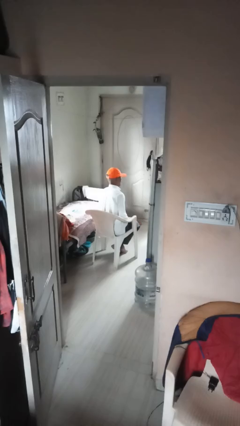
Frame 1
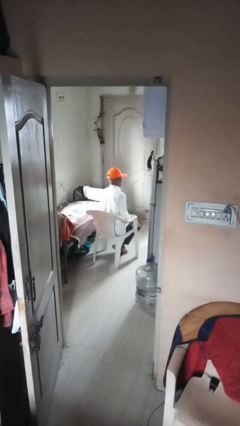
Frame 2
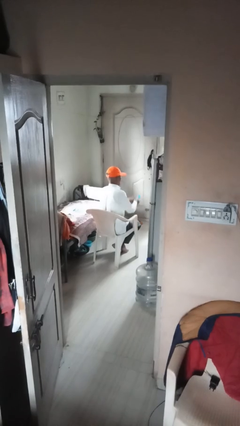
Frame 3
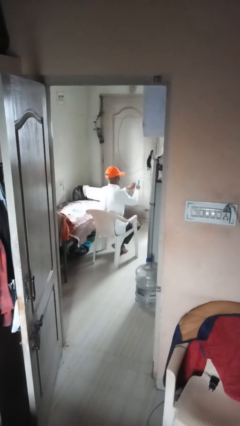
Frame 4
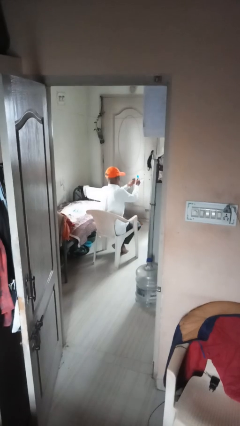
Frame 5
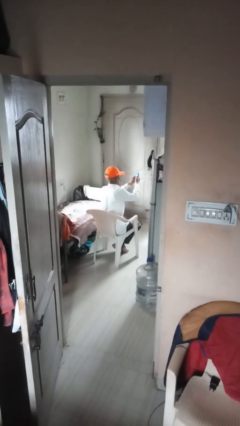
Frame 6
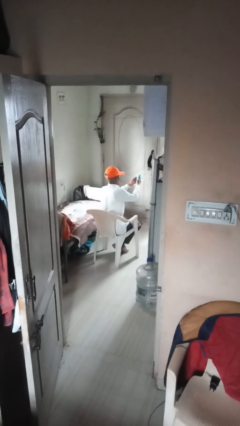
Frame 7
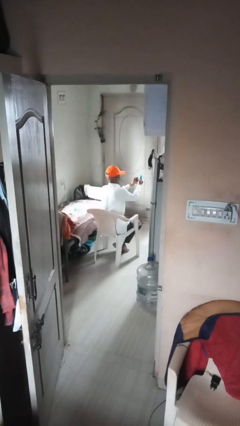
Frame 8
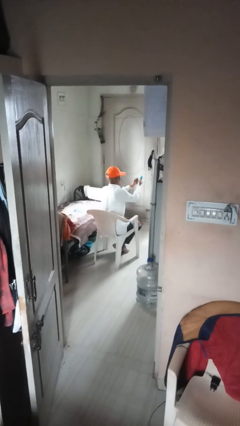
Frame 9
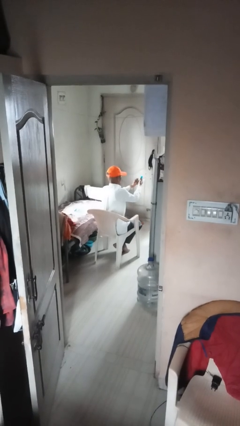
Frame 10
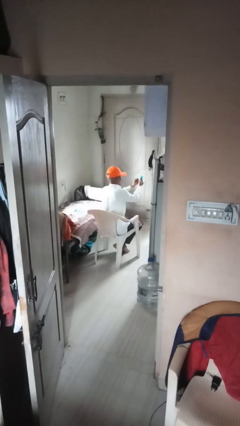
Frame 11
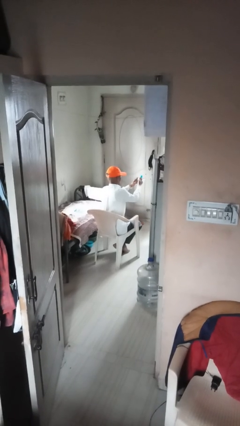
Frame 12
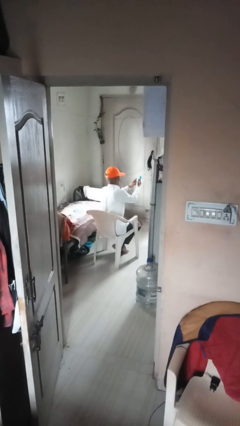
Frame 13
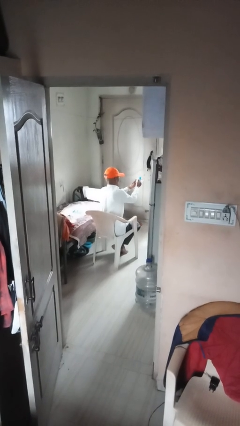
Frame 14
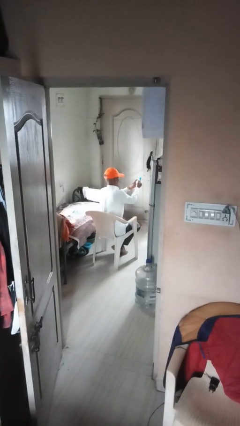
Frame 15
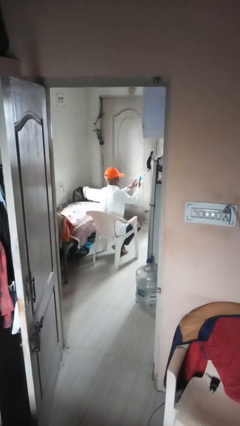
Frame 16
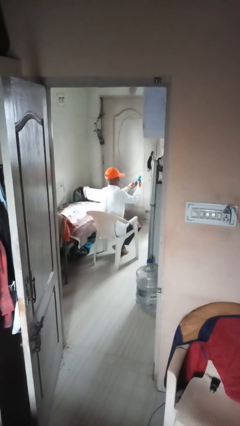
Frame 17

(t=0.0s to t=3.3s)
person squeezes object

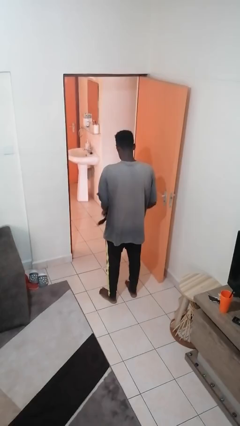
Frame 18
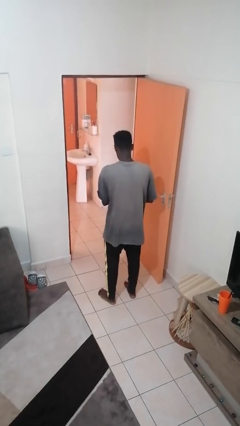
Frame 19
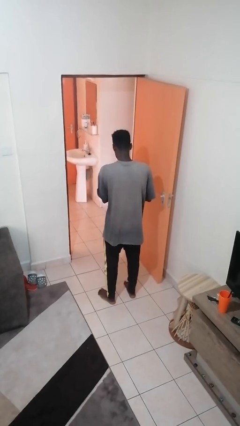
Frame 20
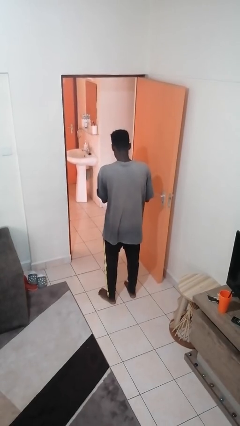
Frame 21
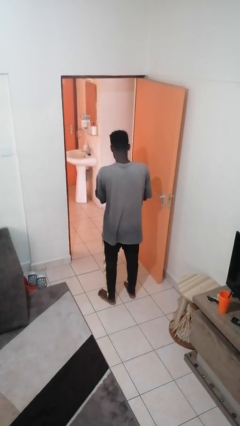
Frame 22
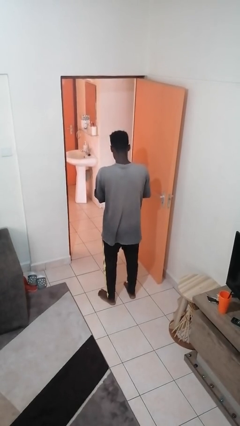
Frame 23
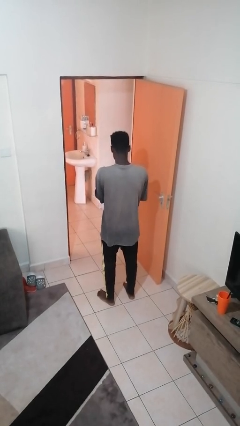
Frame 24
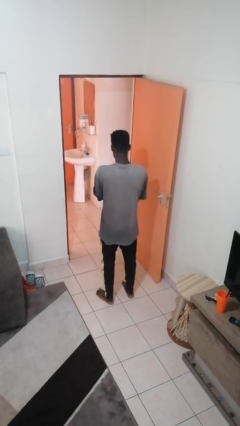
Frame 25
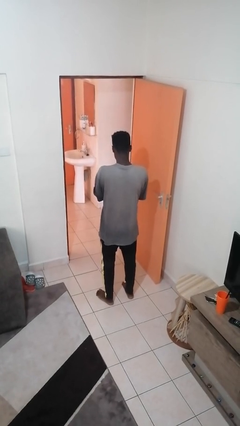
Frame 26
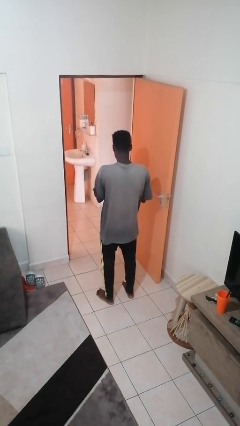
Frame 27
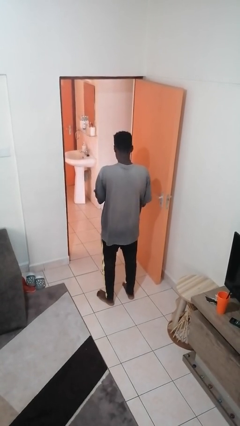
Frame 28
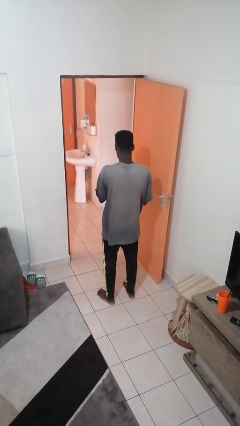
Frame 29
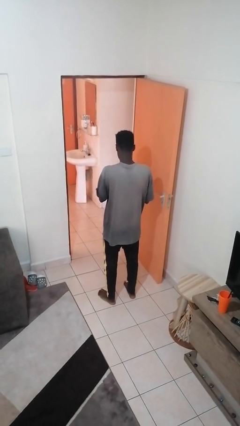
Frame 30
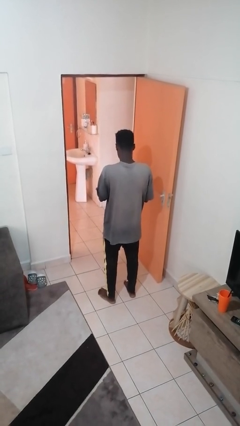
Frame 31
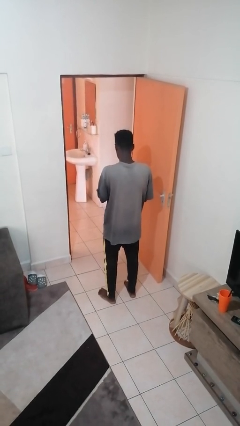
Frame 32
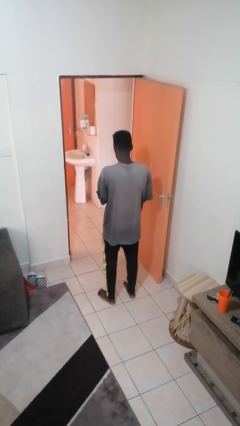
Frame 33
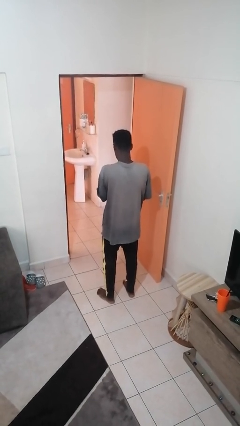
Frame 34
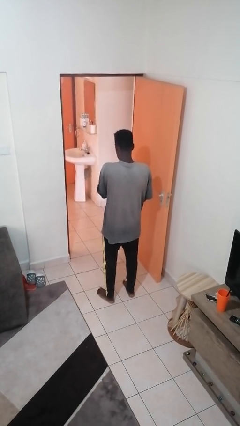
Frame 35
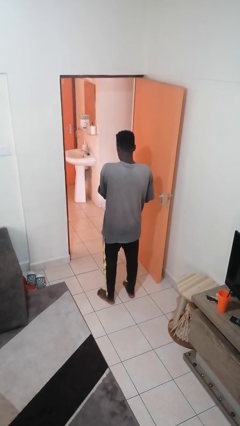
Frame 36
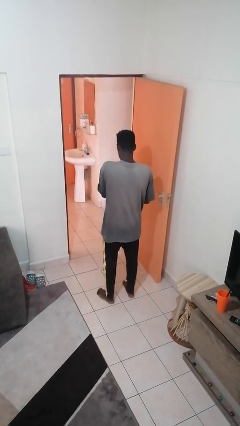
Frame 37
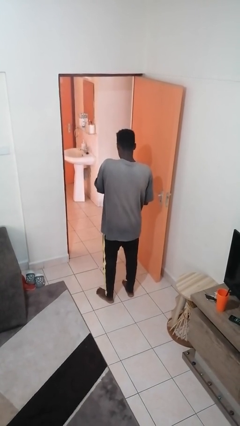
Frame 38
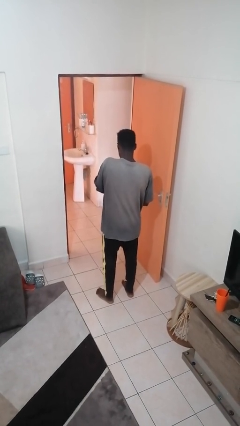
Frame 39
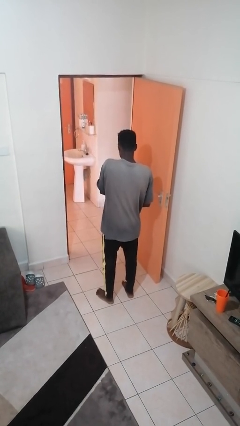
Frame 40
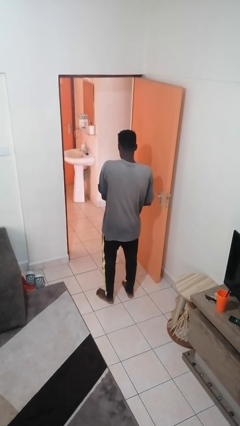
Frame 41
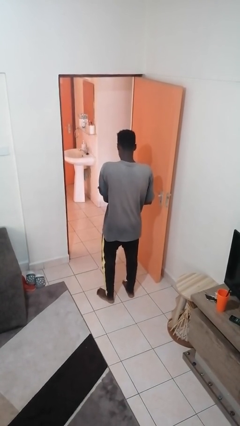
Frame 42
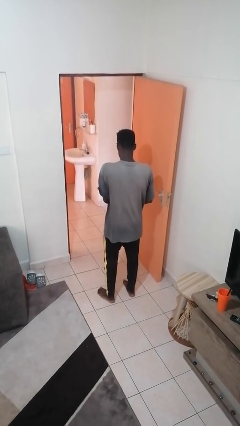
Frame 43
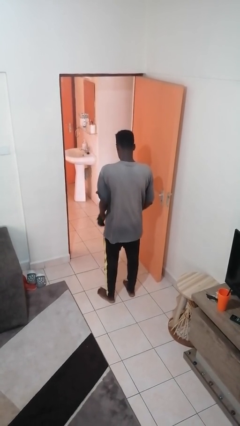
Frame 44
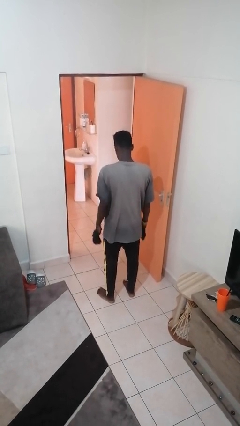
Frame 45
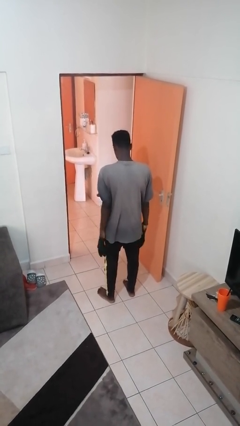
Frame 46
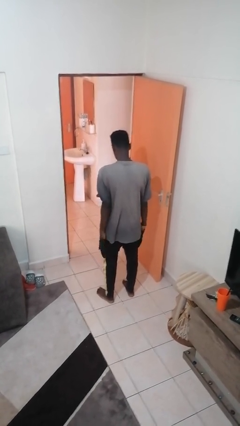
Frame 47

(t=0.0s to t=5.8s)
person puts on gloves

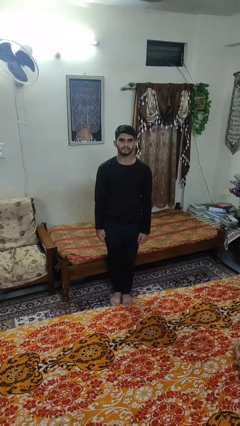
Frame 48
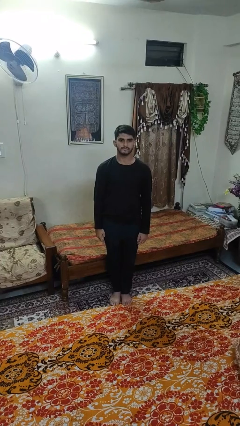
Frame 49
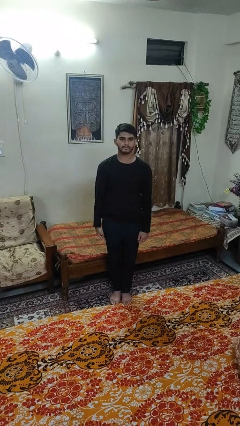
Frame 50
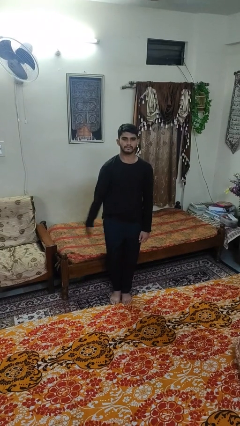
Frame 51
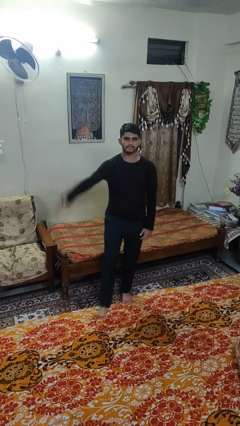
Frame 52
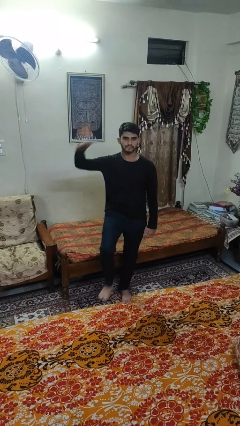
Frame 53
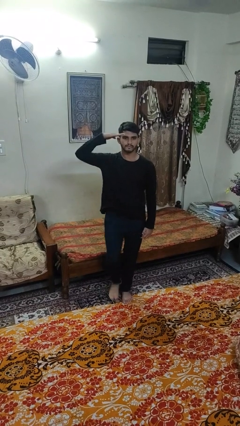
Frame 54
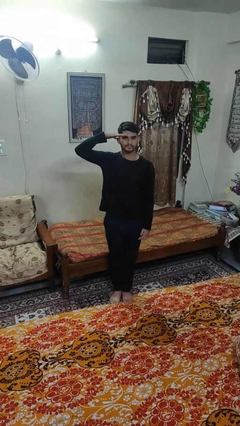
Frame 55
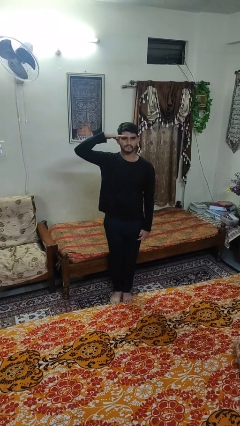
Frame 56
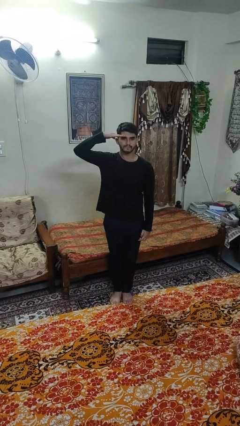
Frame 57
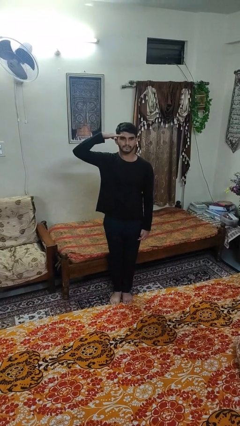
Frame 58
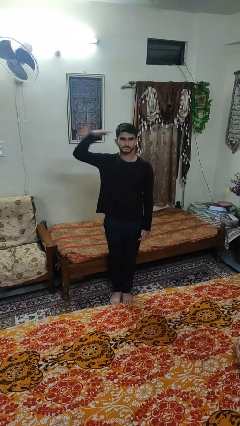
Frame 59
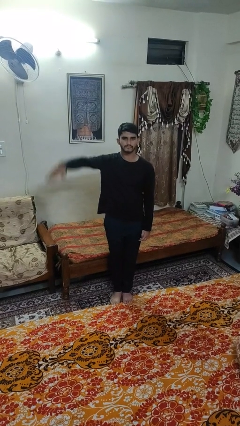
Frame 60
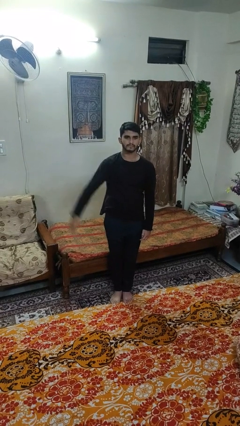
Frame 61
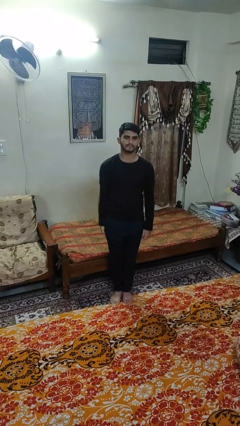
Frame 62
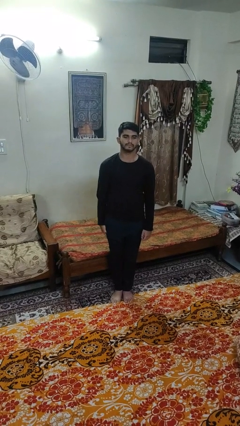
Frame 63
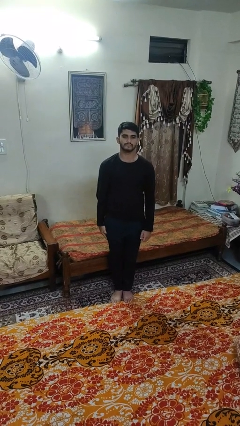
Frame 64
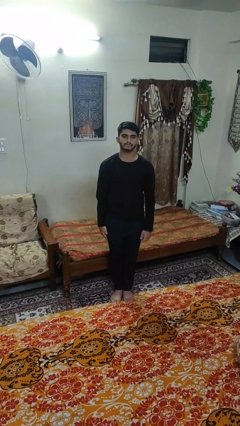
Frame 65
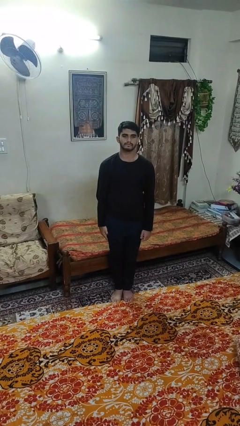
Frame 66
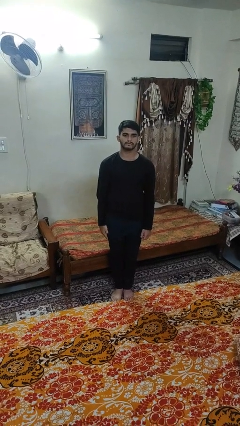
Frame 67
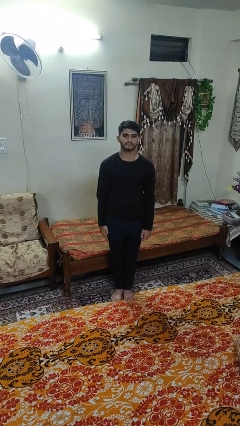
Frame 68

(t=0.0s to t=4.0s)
person salutes

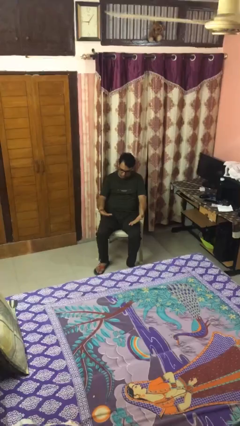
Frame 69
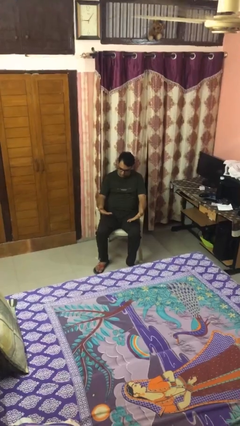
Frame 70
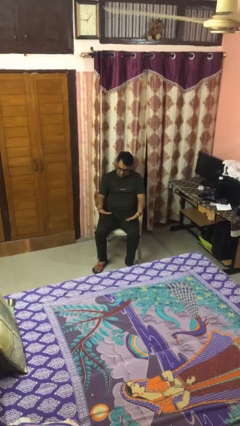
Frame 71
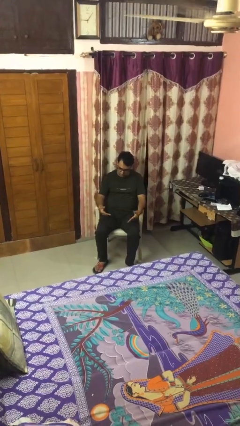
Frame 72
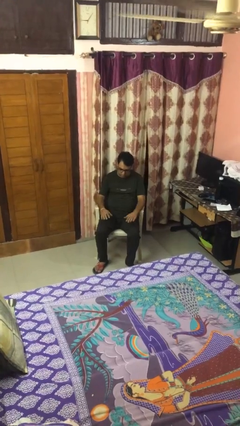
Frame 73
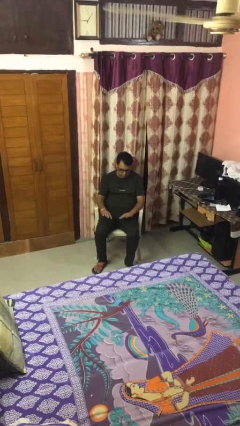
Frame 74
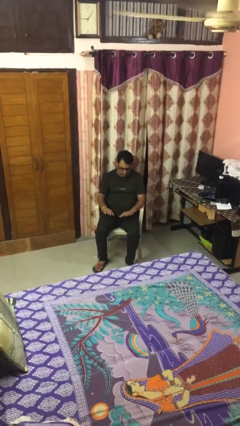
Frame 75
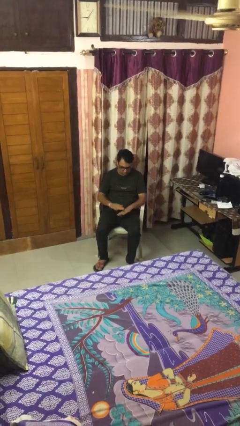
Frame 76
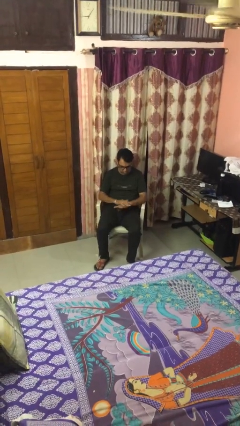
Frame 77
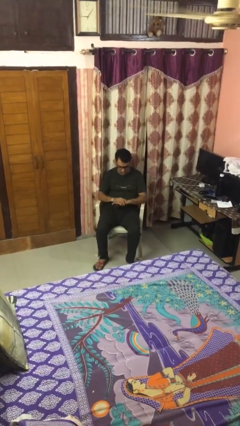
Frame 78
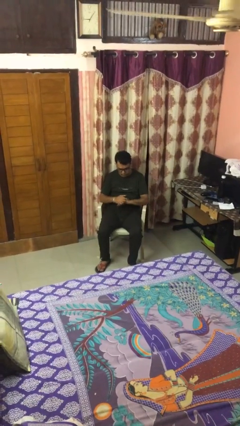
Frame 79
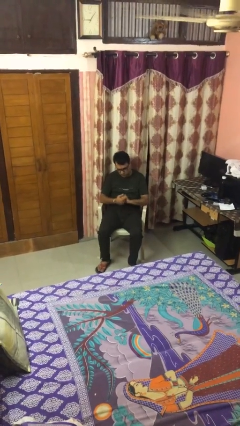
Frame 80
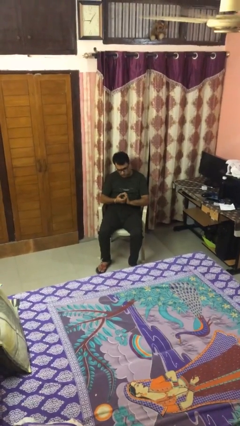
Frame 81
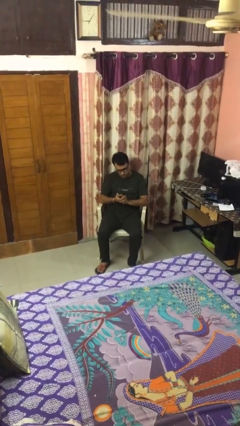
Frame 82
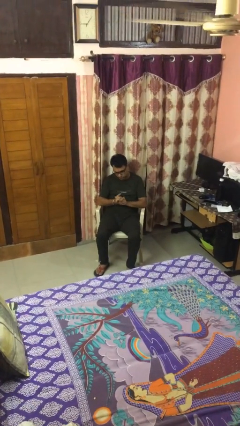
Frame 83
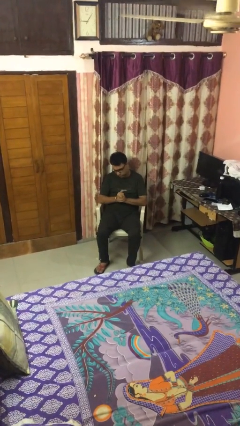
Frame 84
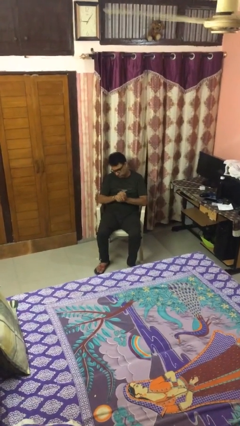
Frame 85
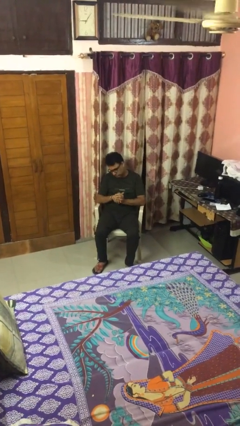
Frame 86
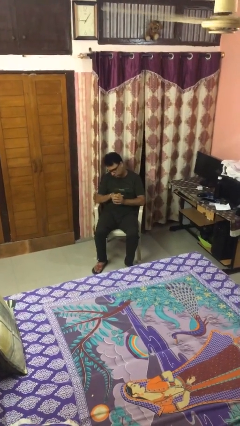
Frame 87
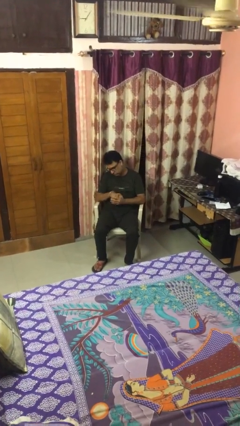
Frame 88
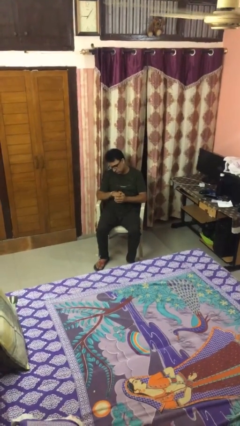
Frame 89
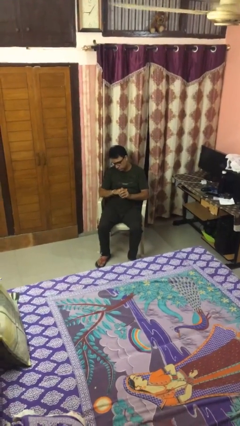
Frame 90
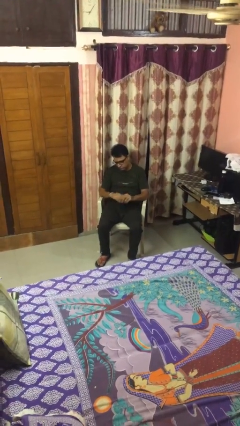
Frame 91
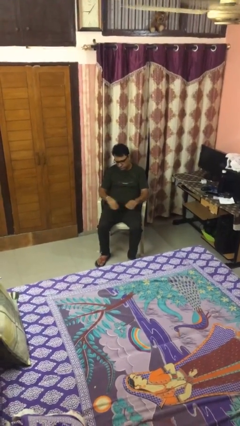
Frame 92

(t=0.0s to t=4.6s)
person looks at hands in lap

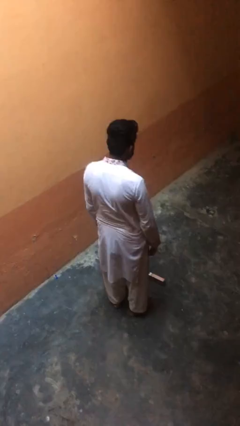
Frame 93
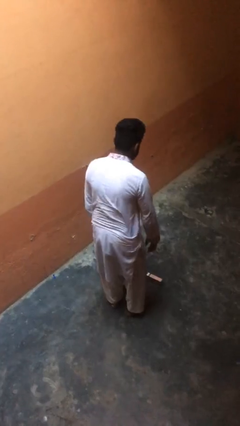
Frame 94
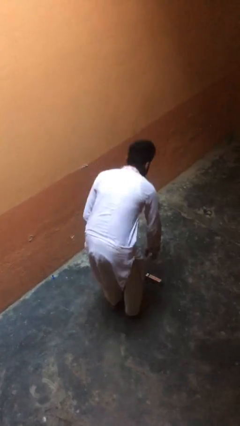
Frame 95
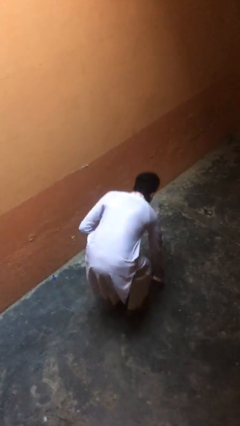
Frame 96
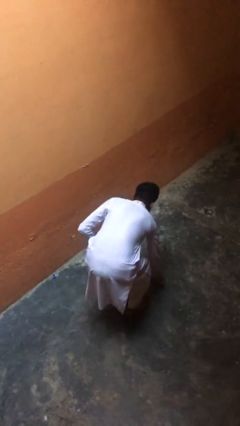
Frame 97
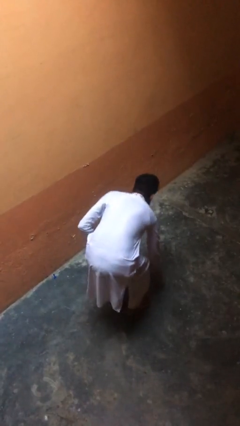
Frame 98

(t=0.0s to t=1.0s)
person picks up object from floor
